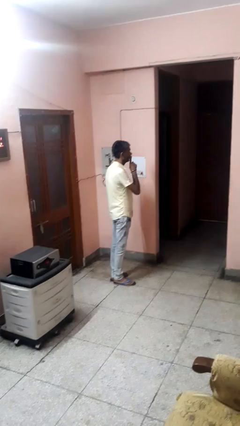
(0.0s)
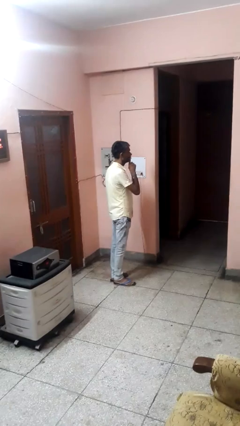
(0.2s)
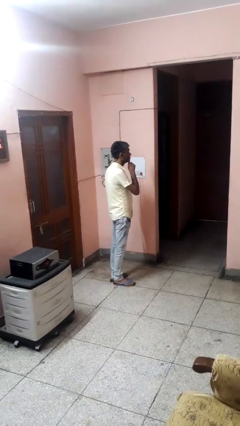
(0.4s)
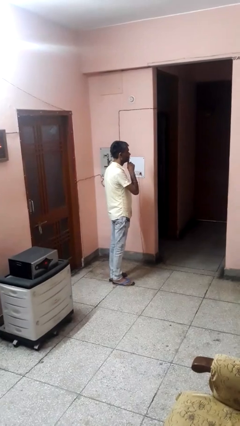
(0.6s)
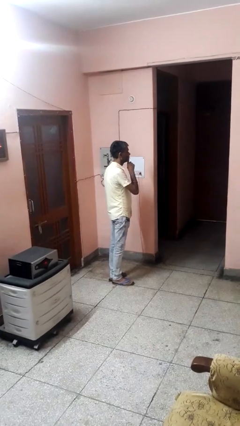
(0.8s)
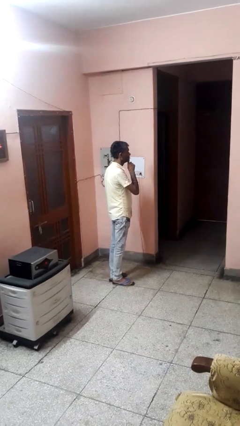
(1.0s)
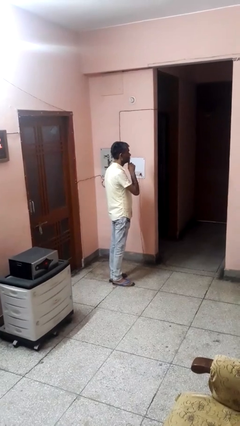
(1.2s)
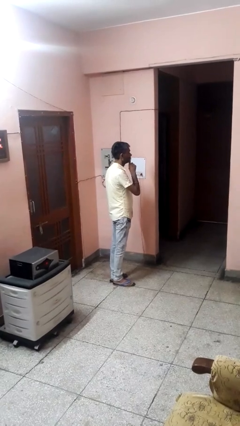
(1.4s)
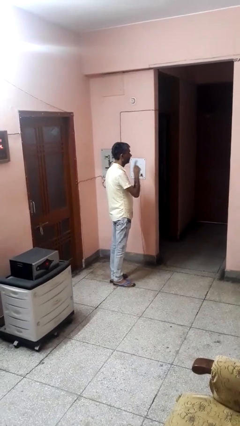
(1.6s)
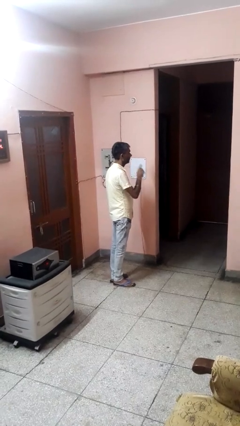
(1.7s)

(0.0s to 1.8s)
person gestures be quiet

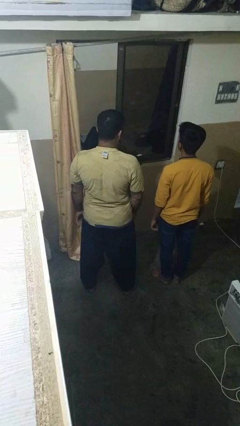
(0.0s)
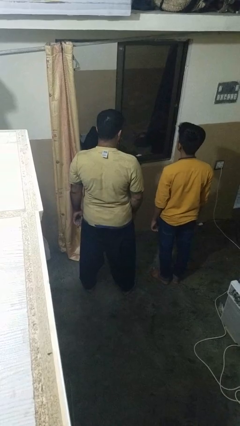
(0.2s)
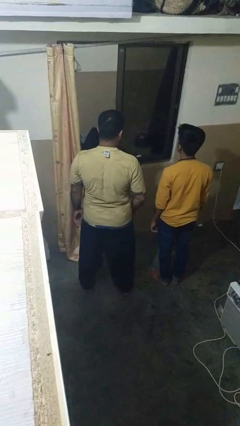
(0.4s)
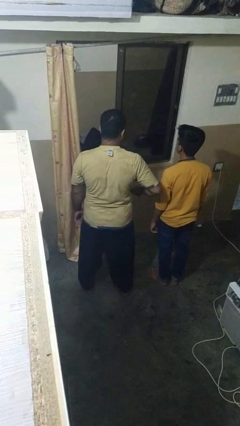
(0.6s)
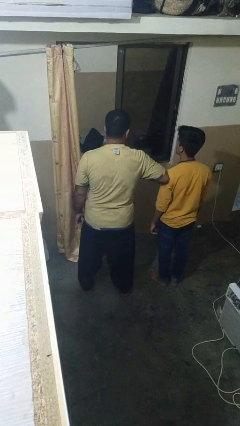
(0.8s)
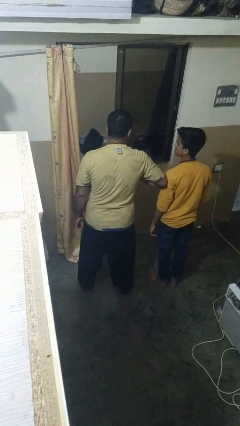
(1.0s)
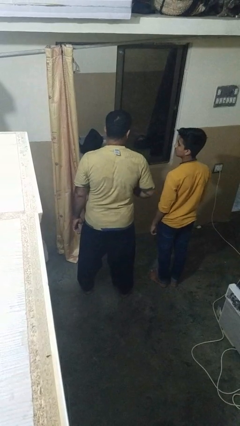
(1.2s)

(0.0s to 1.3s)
person nudges person with elbow

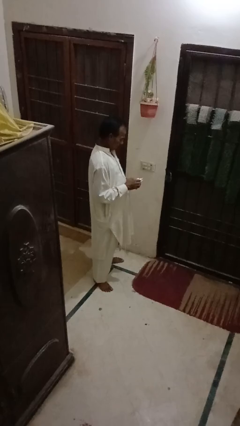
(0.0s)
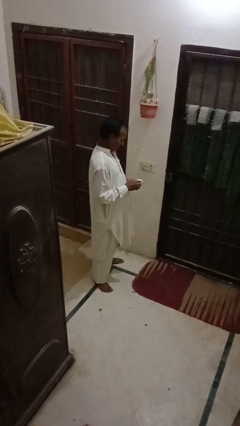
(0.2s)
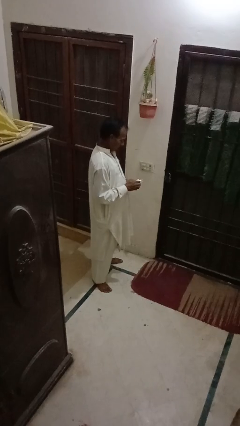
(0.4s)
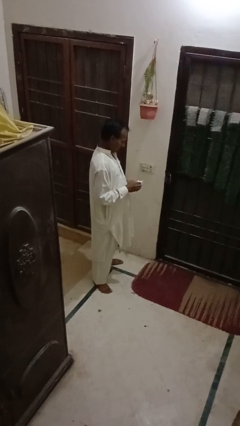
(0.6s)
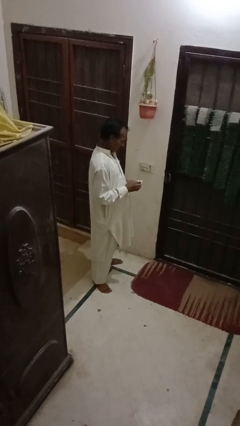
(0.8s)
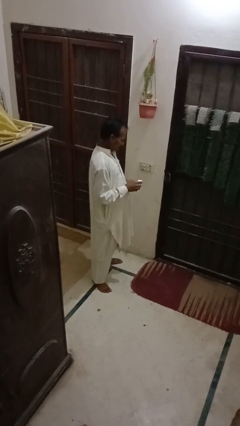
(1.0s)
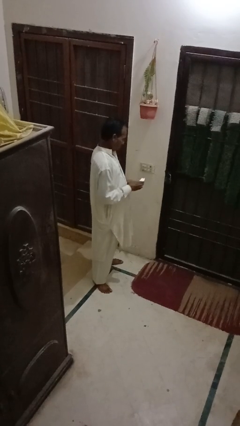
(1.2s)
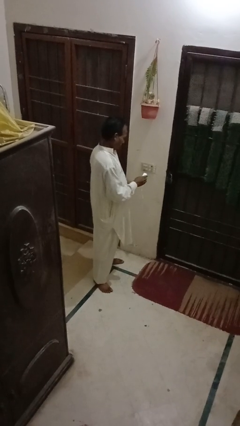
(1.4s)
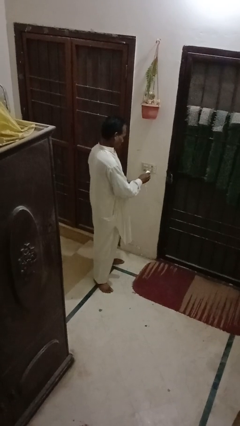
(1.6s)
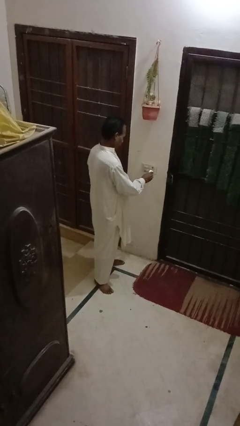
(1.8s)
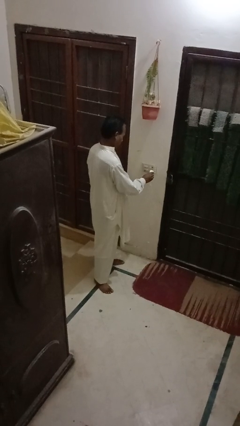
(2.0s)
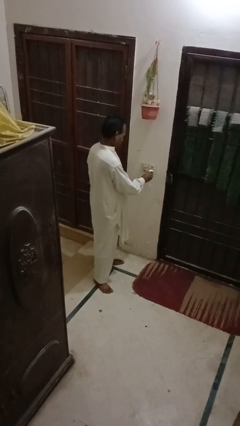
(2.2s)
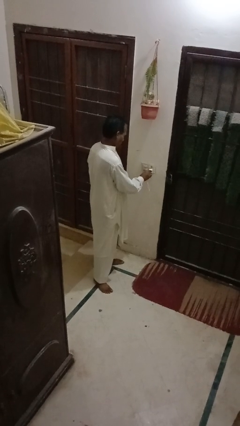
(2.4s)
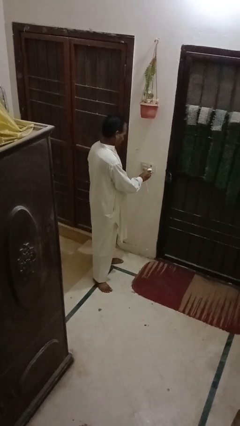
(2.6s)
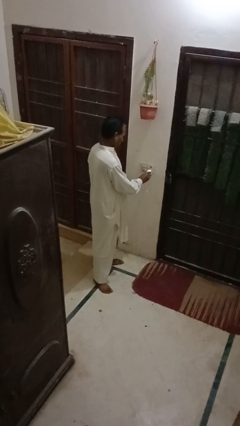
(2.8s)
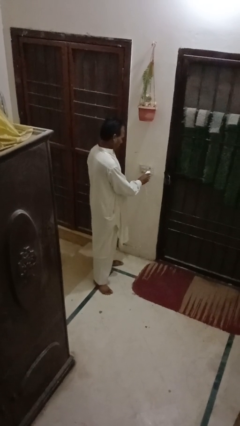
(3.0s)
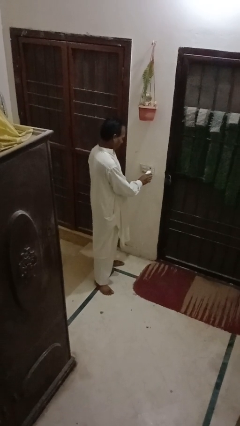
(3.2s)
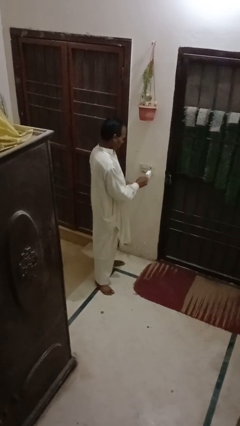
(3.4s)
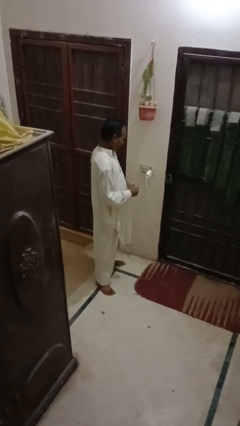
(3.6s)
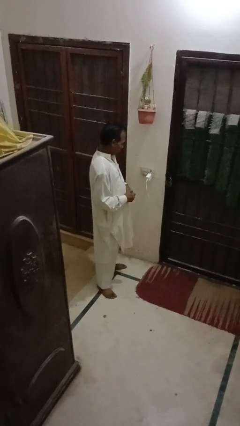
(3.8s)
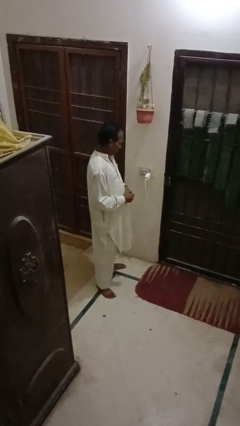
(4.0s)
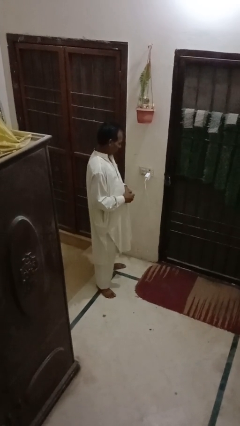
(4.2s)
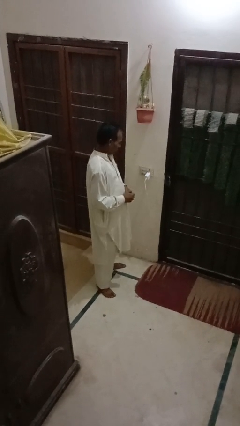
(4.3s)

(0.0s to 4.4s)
person plugs into electrical socket

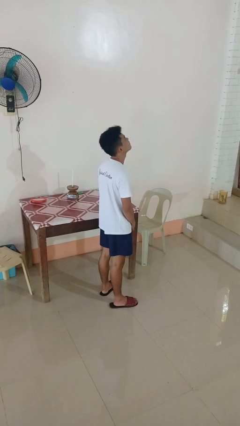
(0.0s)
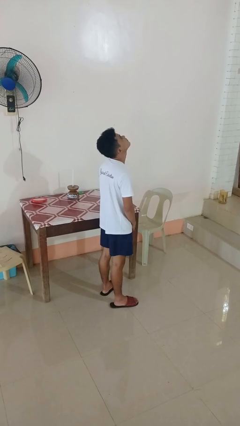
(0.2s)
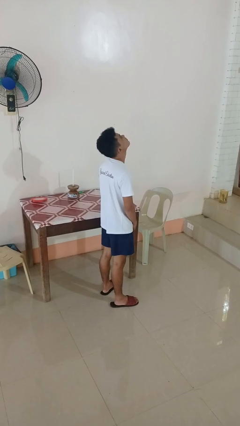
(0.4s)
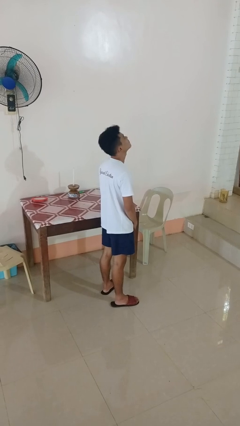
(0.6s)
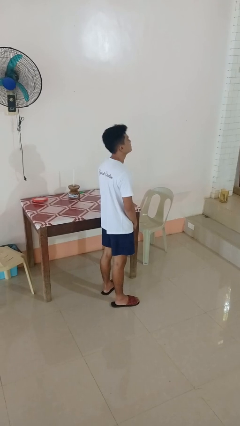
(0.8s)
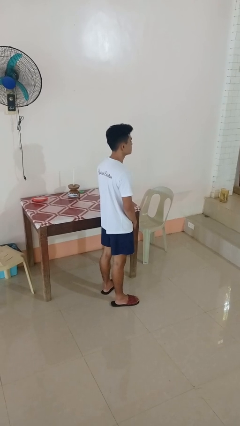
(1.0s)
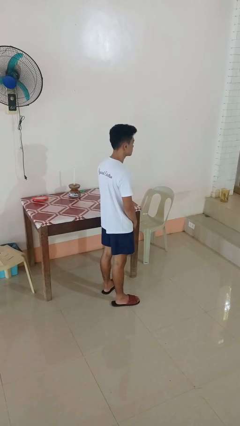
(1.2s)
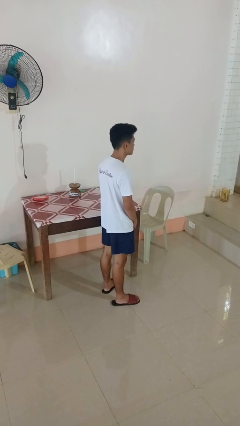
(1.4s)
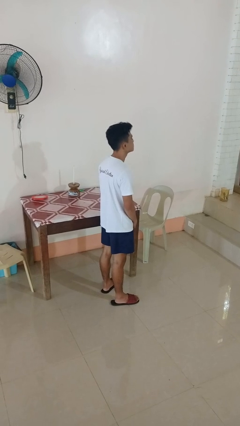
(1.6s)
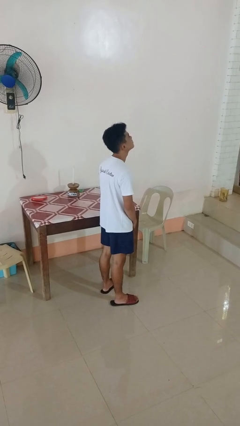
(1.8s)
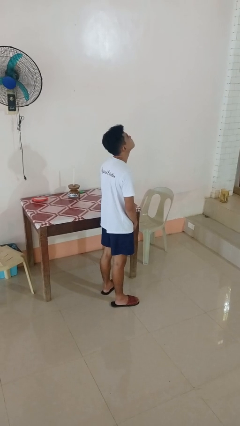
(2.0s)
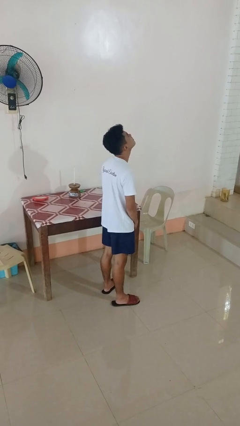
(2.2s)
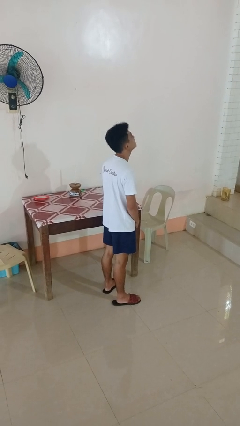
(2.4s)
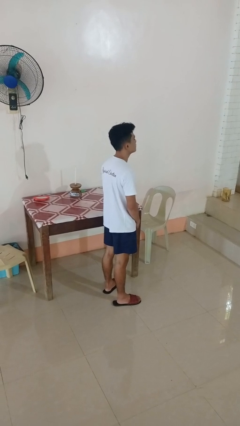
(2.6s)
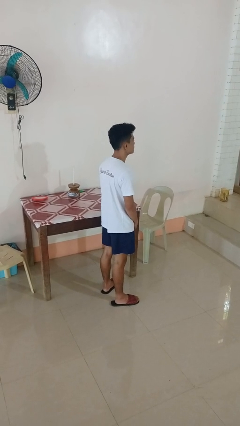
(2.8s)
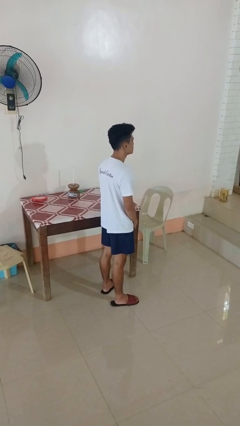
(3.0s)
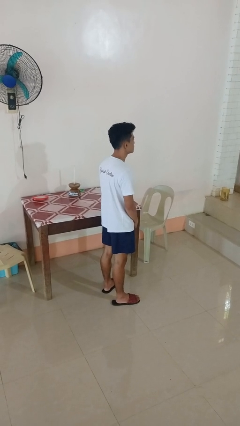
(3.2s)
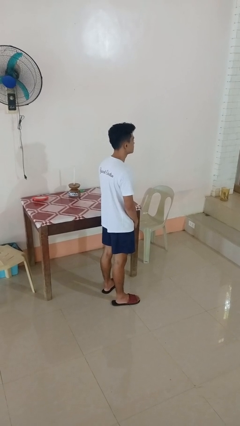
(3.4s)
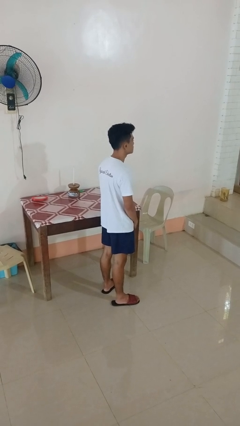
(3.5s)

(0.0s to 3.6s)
person nods head

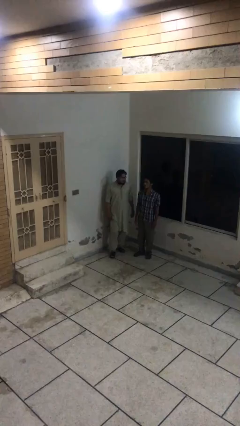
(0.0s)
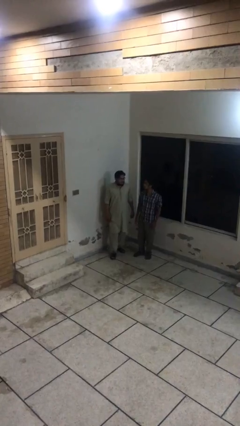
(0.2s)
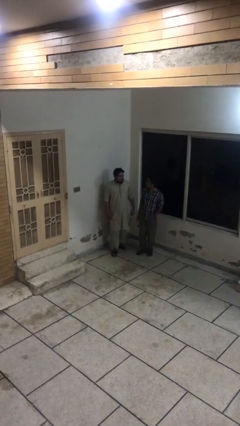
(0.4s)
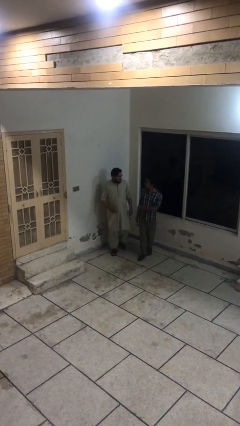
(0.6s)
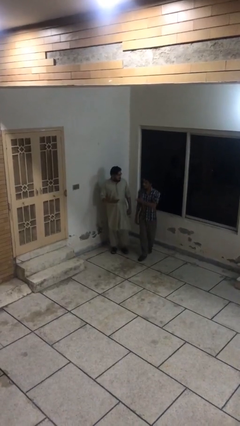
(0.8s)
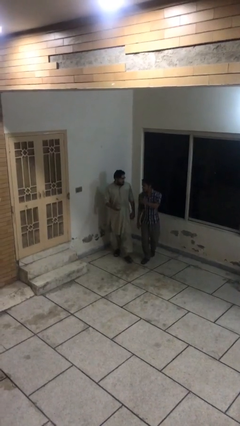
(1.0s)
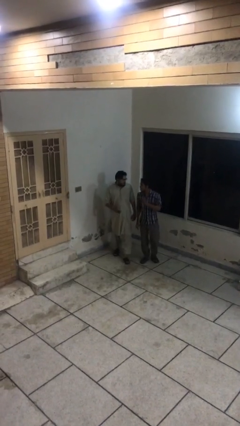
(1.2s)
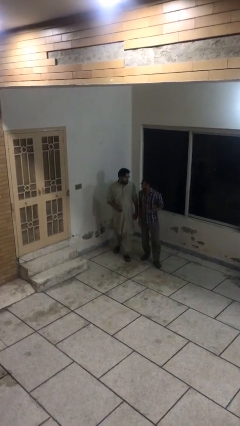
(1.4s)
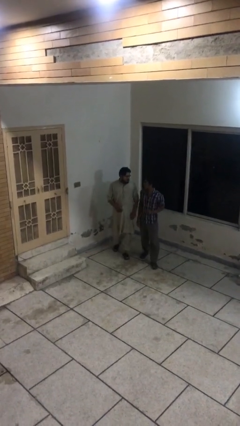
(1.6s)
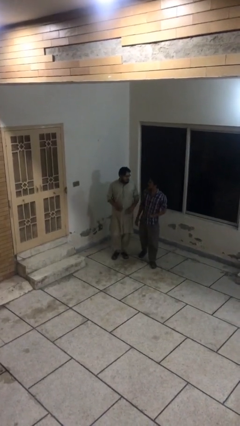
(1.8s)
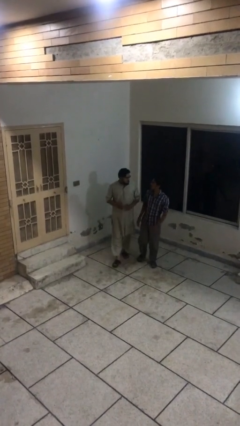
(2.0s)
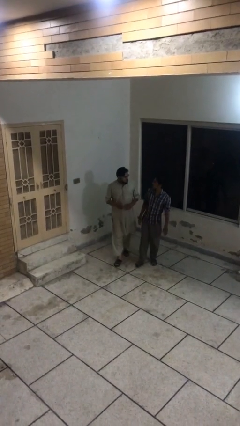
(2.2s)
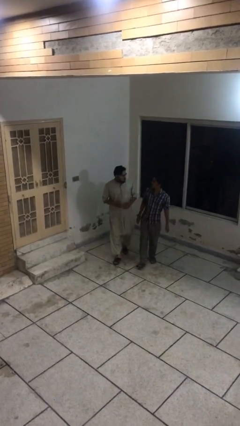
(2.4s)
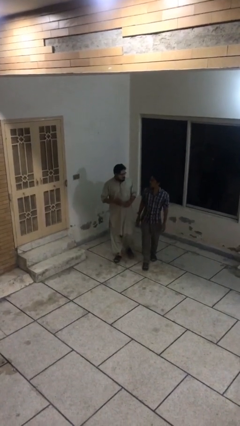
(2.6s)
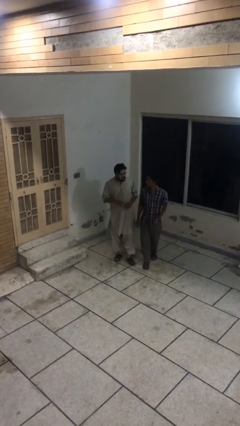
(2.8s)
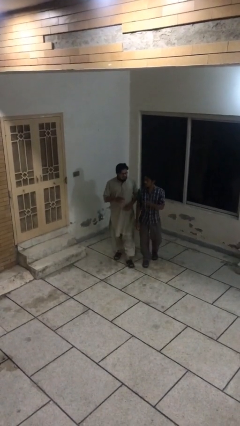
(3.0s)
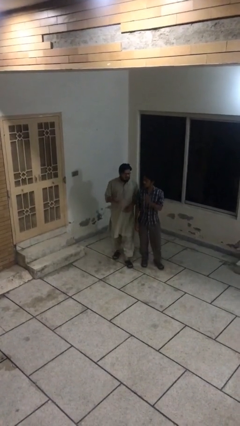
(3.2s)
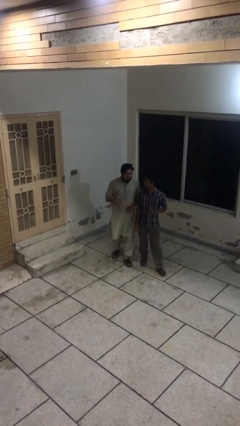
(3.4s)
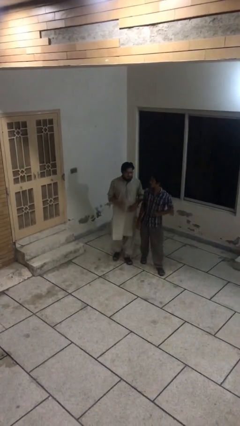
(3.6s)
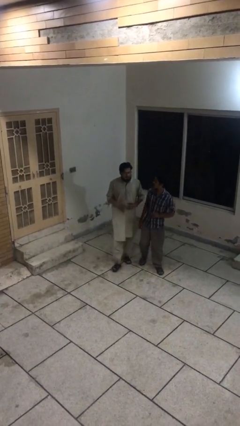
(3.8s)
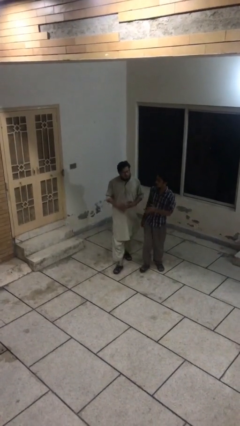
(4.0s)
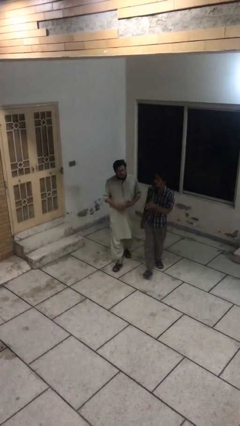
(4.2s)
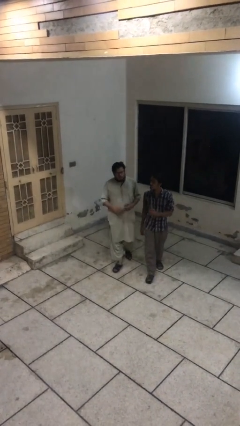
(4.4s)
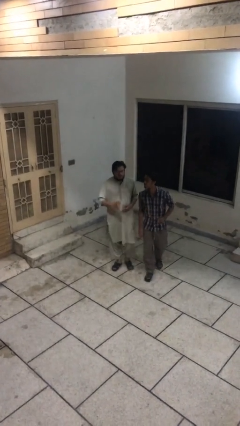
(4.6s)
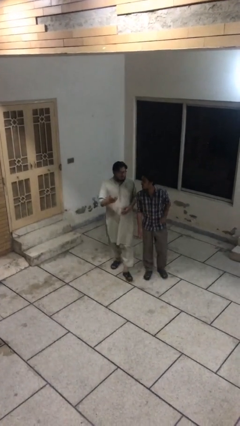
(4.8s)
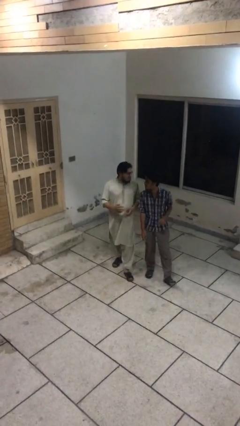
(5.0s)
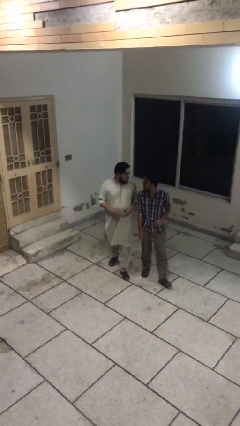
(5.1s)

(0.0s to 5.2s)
person talks to person

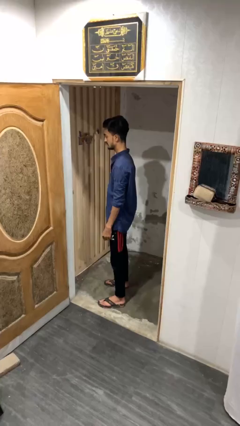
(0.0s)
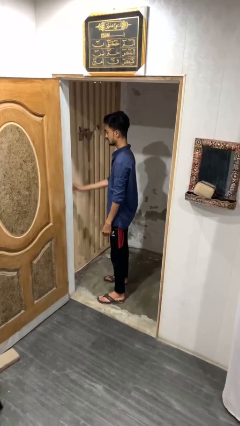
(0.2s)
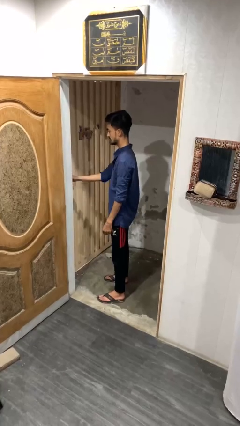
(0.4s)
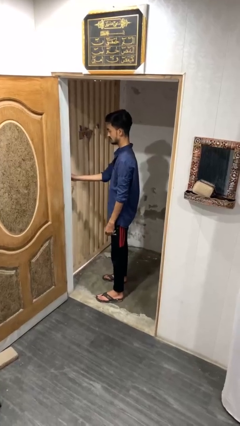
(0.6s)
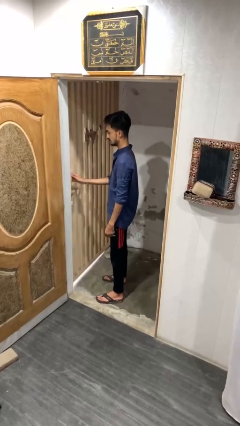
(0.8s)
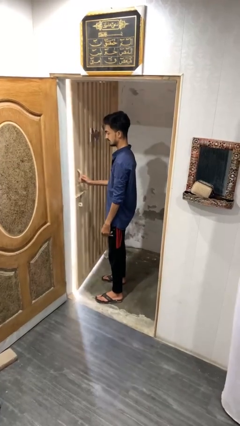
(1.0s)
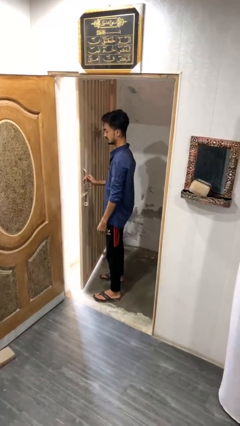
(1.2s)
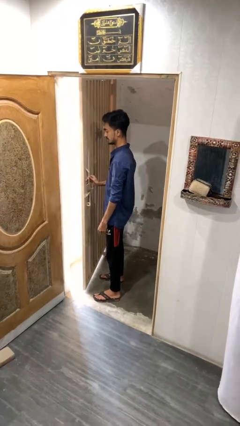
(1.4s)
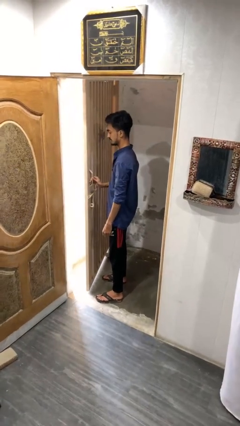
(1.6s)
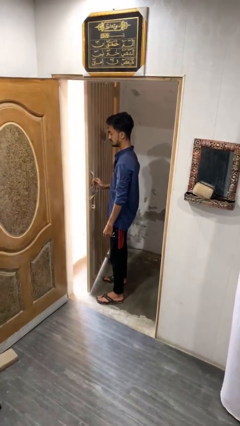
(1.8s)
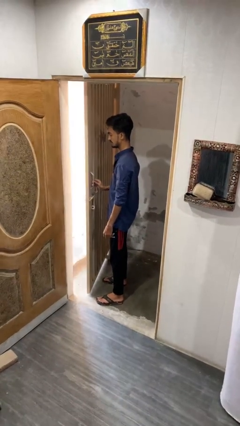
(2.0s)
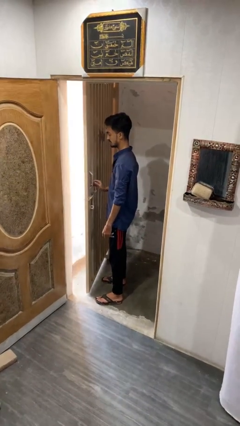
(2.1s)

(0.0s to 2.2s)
person opens gate
